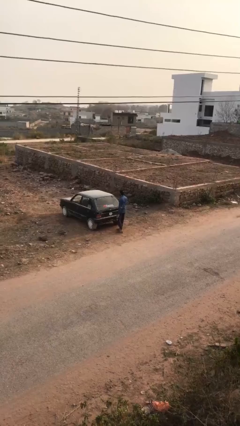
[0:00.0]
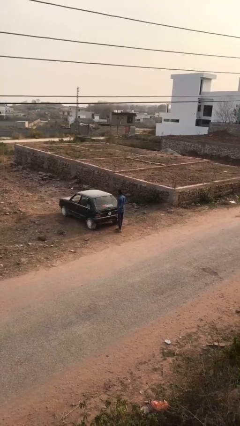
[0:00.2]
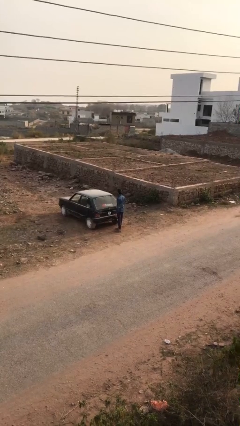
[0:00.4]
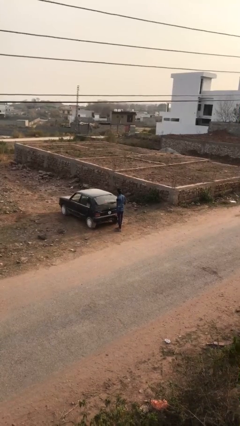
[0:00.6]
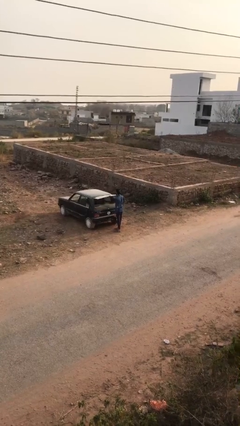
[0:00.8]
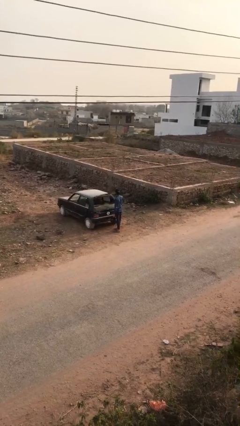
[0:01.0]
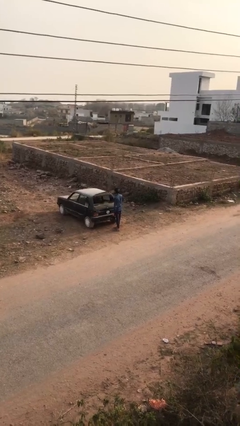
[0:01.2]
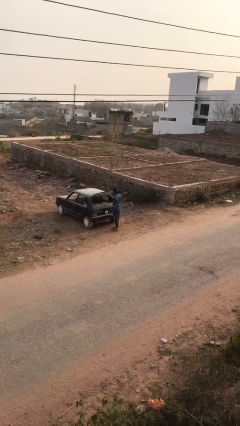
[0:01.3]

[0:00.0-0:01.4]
person opens car trunk

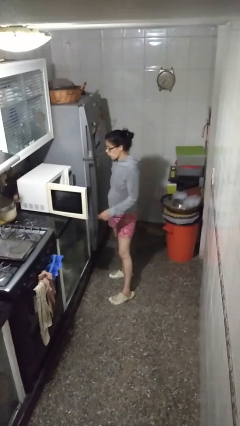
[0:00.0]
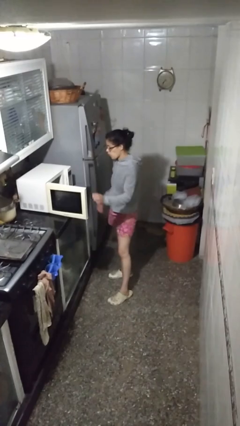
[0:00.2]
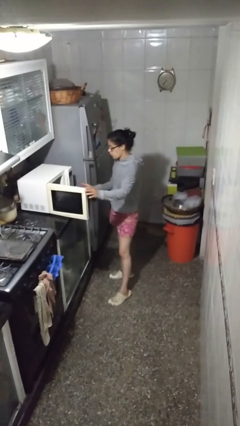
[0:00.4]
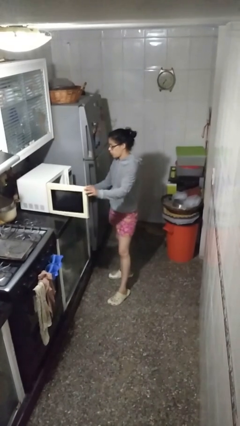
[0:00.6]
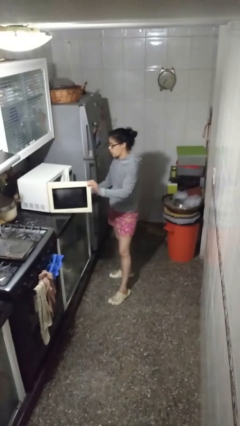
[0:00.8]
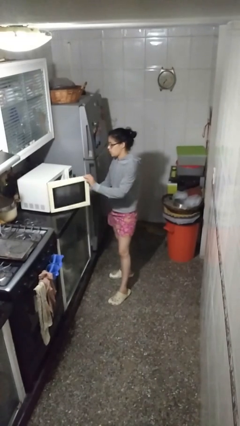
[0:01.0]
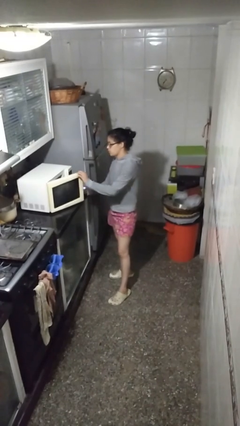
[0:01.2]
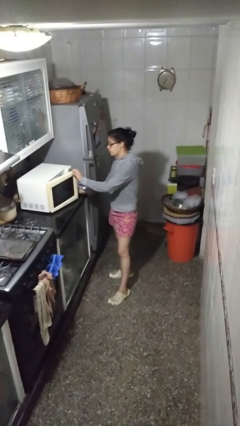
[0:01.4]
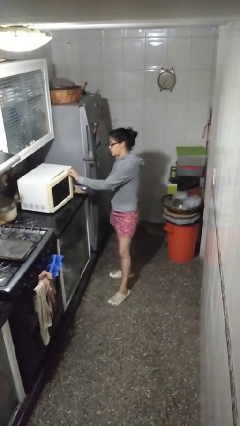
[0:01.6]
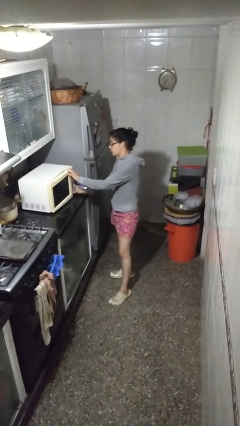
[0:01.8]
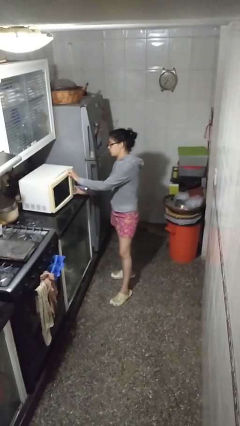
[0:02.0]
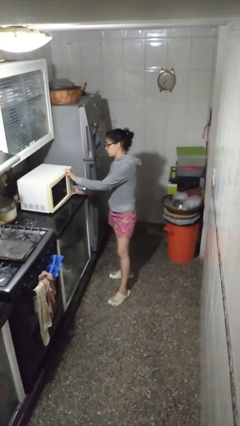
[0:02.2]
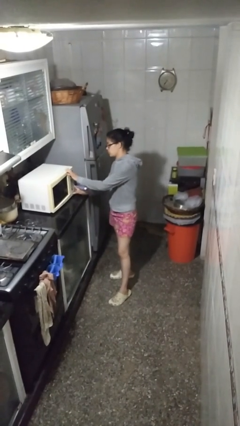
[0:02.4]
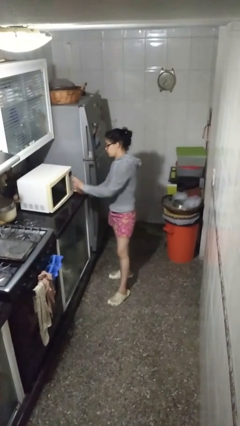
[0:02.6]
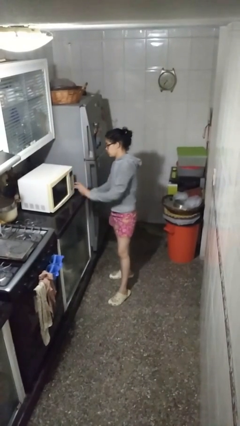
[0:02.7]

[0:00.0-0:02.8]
person closes microwave

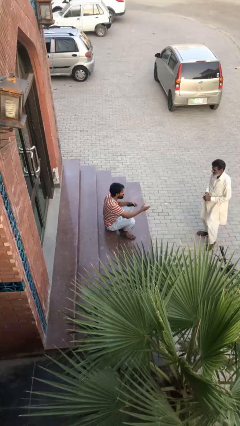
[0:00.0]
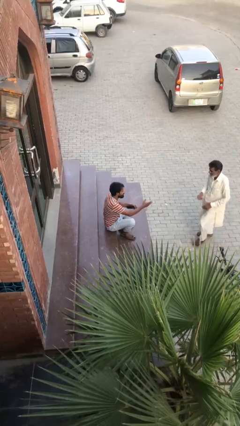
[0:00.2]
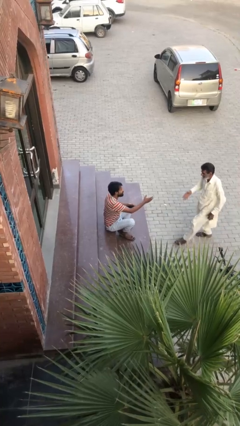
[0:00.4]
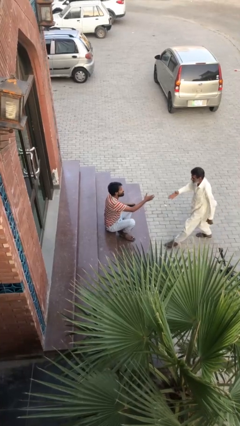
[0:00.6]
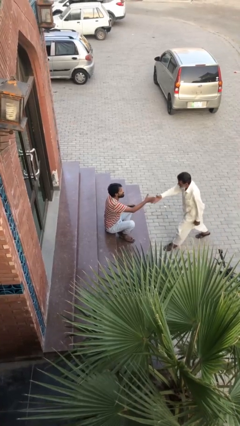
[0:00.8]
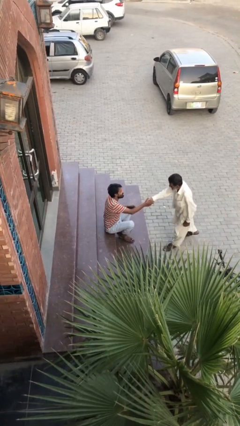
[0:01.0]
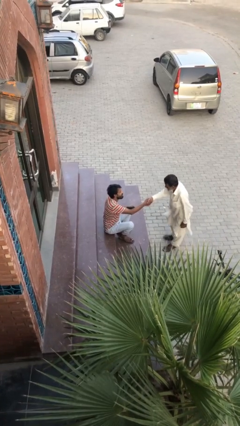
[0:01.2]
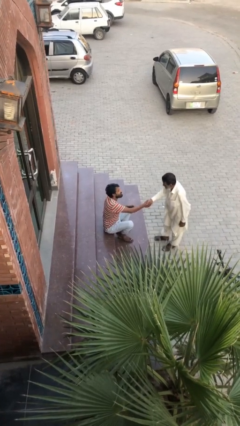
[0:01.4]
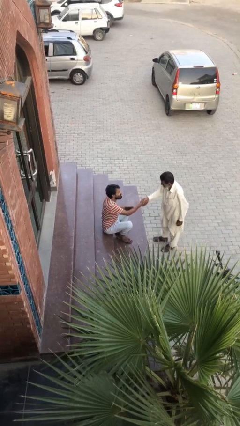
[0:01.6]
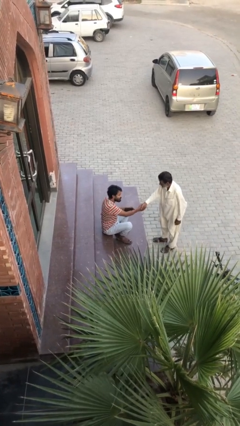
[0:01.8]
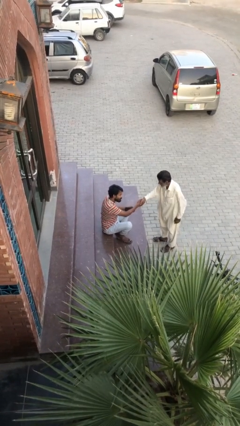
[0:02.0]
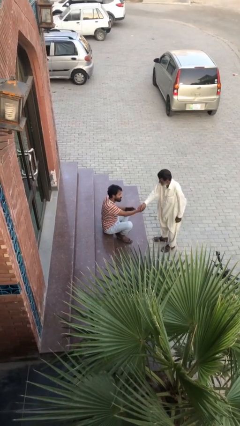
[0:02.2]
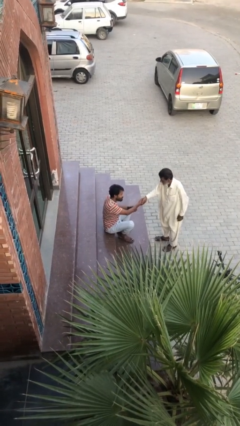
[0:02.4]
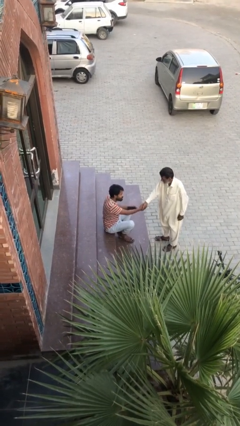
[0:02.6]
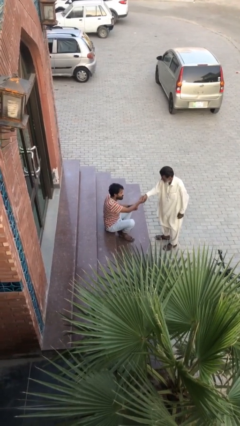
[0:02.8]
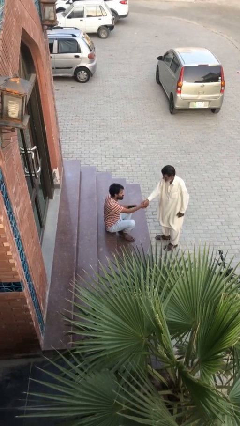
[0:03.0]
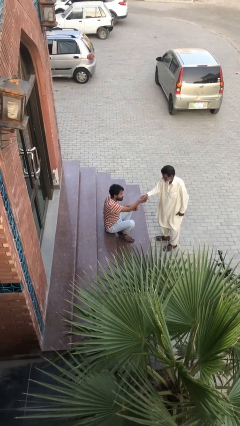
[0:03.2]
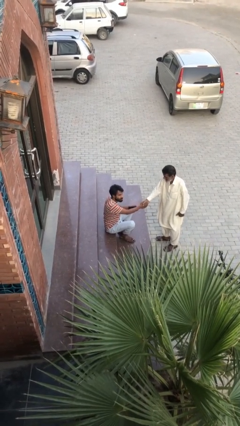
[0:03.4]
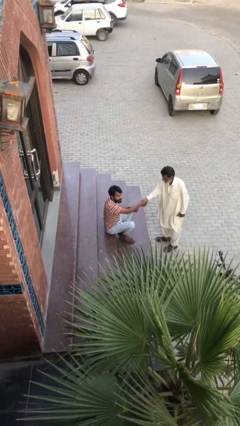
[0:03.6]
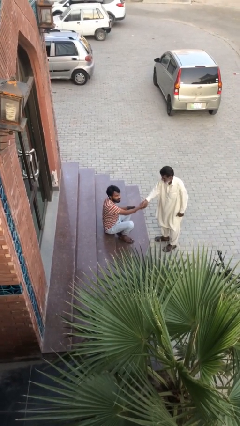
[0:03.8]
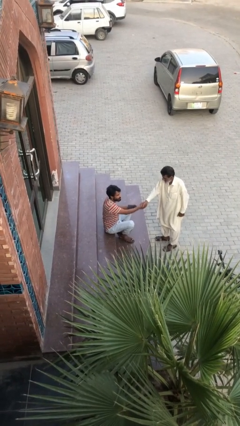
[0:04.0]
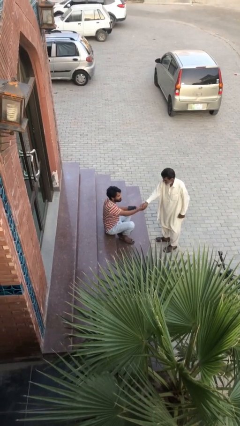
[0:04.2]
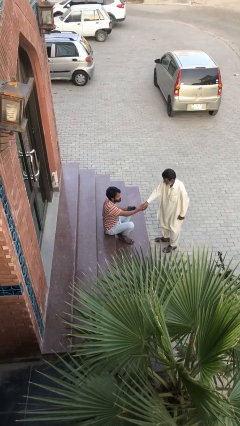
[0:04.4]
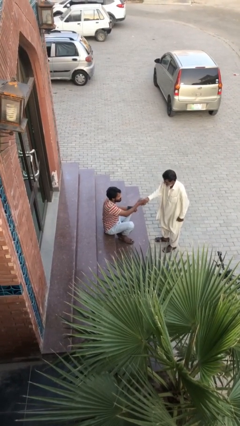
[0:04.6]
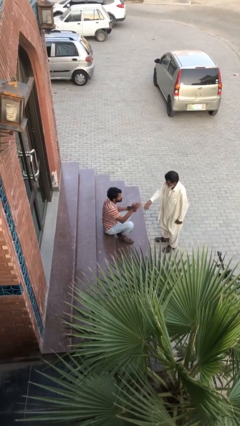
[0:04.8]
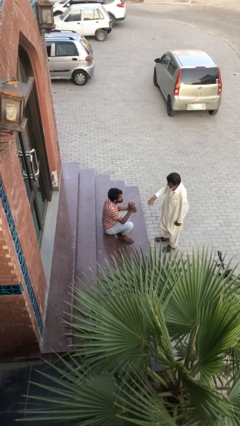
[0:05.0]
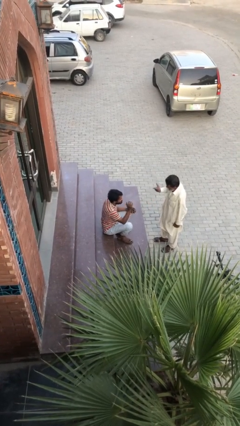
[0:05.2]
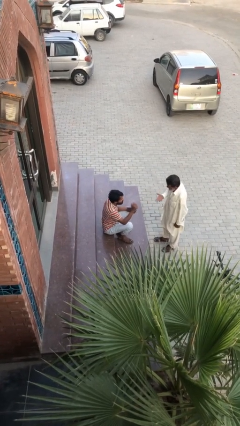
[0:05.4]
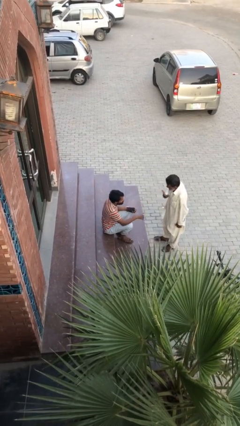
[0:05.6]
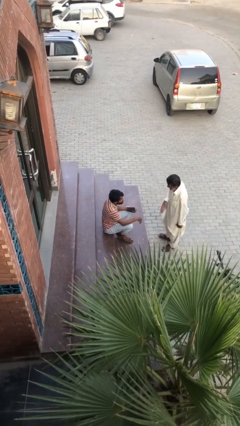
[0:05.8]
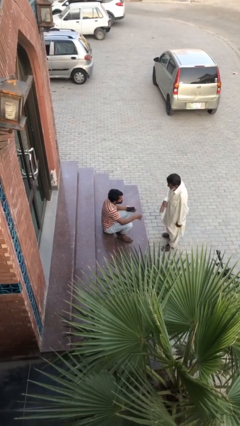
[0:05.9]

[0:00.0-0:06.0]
person shakes hand

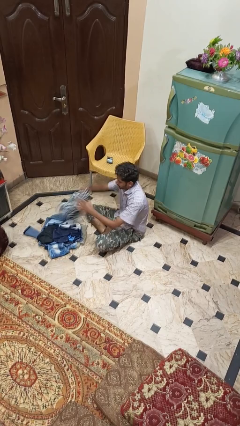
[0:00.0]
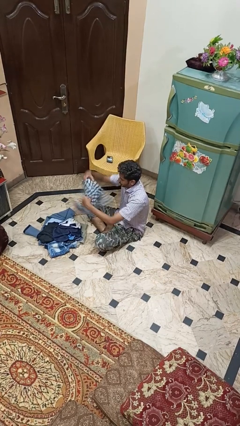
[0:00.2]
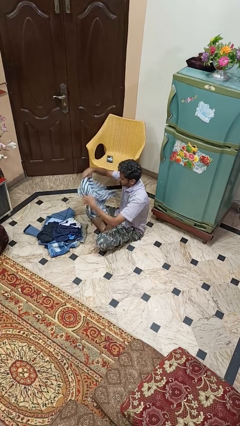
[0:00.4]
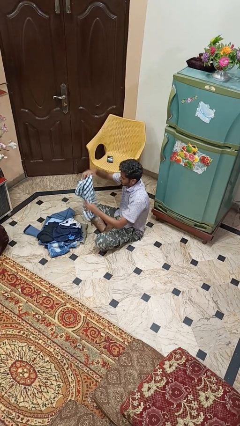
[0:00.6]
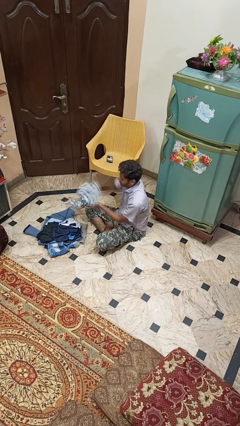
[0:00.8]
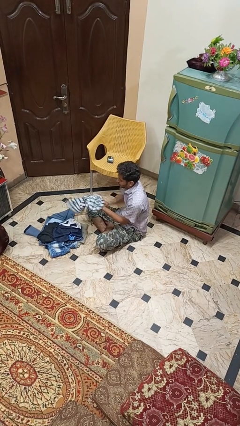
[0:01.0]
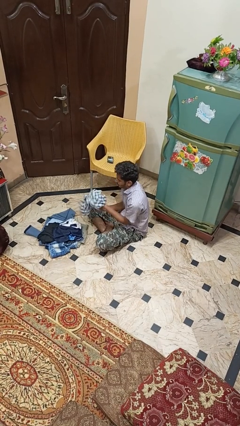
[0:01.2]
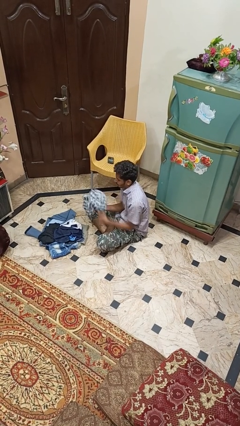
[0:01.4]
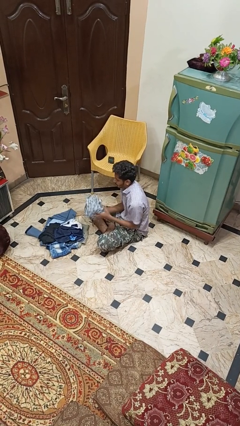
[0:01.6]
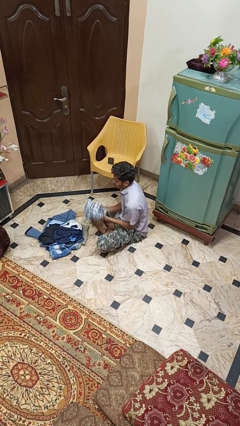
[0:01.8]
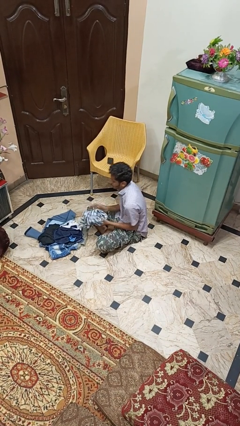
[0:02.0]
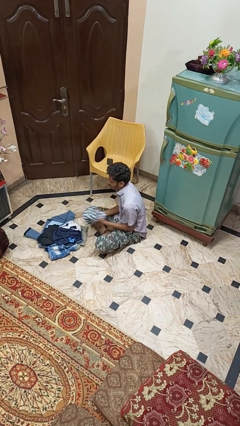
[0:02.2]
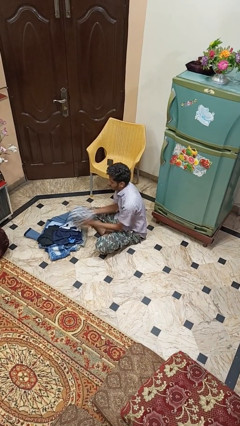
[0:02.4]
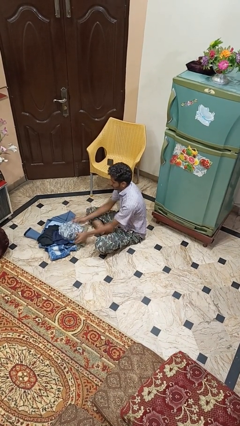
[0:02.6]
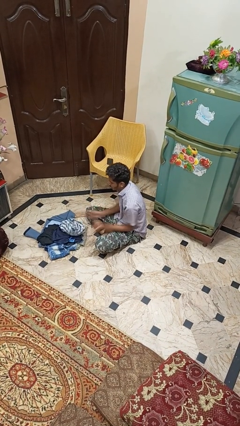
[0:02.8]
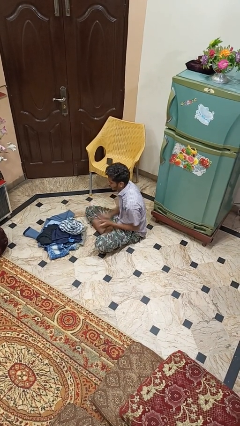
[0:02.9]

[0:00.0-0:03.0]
person folds shirt

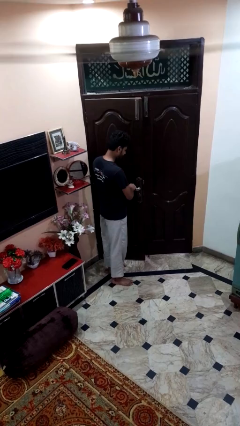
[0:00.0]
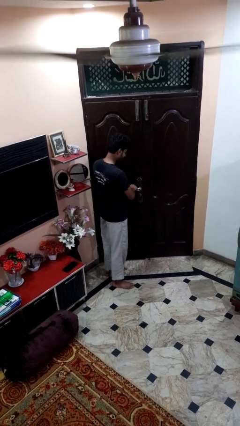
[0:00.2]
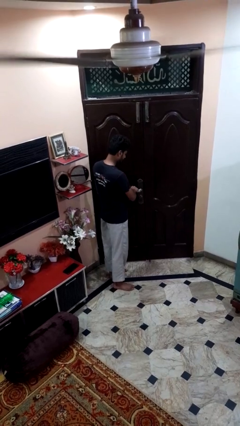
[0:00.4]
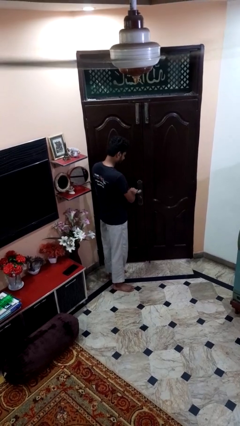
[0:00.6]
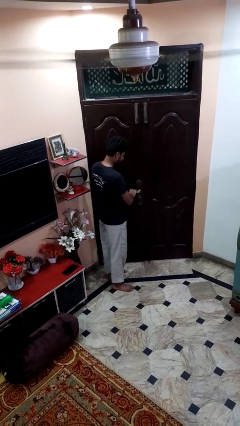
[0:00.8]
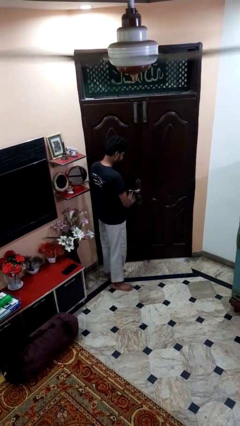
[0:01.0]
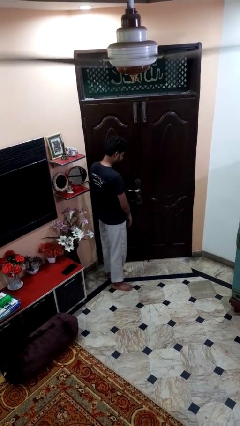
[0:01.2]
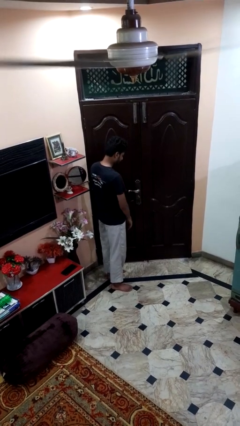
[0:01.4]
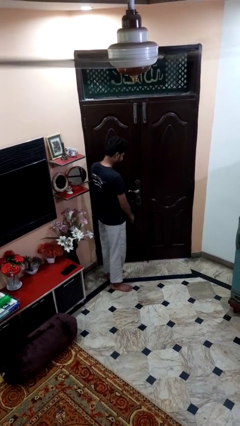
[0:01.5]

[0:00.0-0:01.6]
person closes facility door

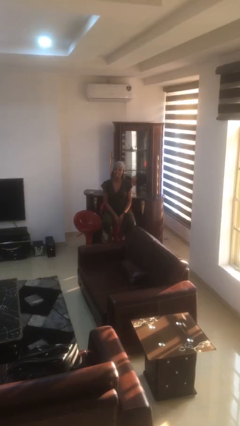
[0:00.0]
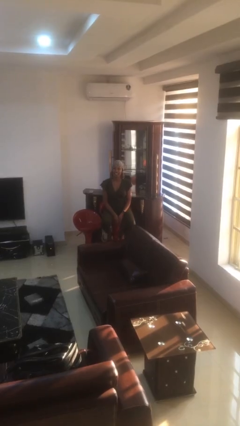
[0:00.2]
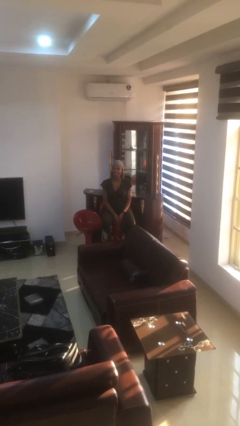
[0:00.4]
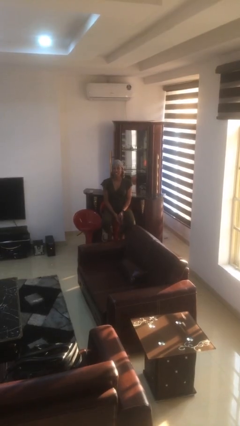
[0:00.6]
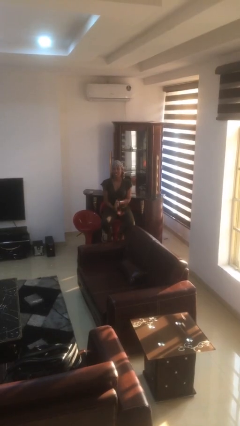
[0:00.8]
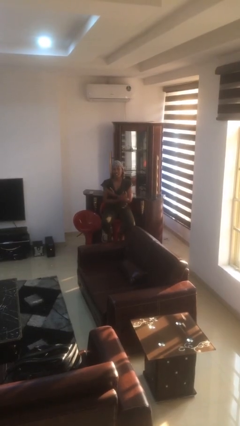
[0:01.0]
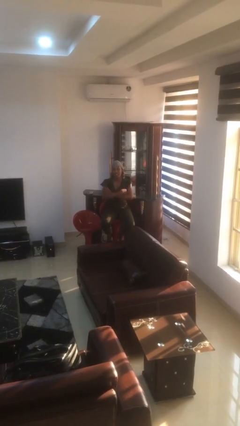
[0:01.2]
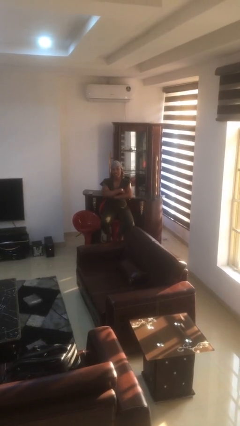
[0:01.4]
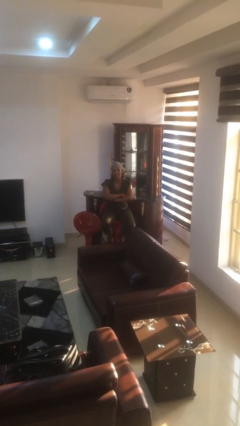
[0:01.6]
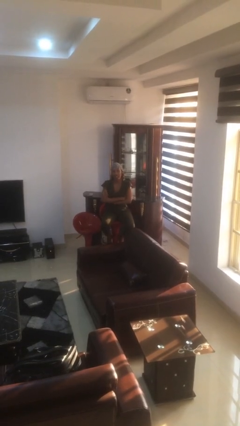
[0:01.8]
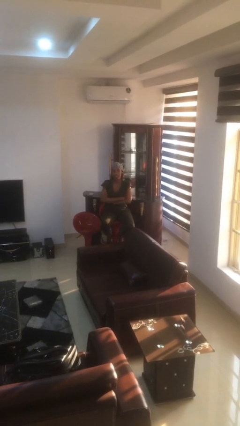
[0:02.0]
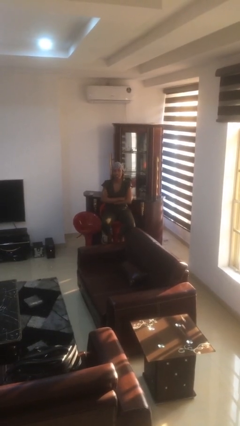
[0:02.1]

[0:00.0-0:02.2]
person crosses arms

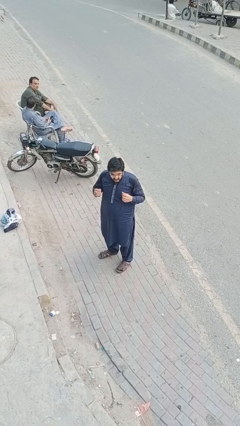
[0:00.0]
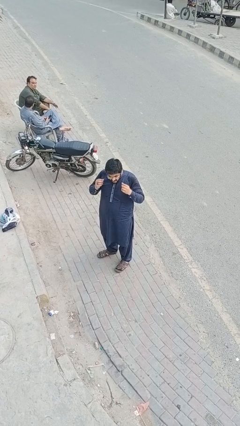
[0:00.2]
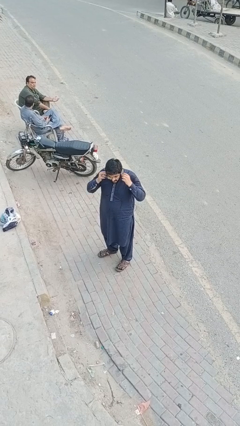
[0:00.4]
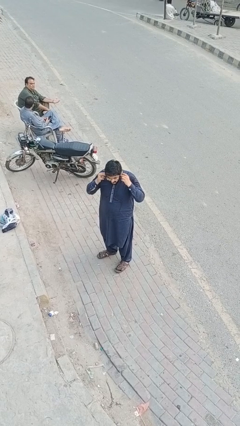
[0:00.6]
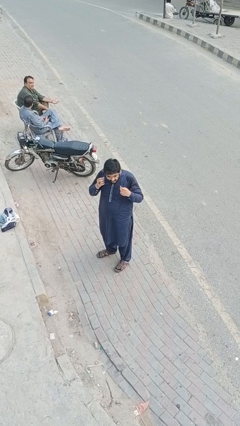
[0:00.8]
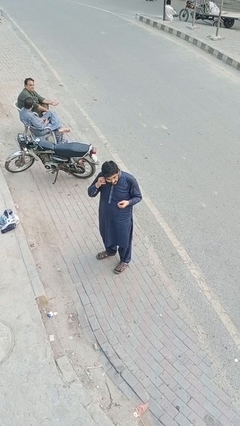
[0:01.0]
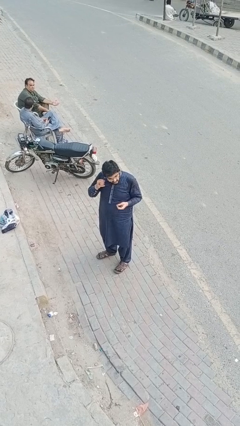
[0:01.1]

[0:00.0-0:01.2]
person takes off headphones
